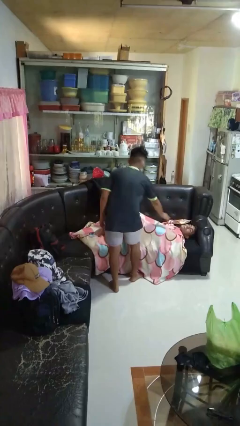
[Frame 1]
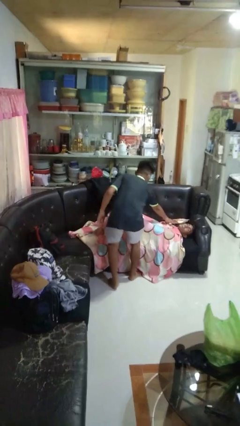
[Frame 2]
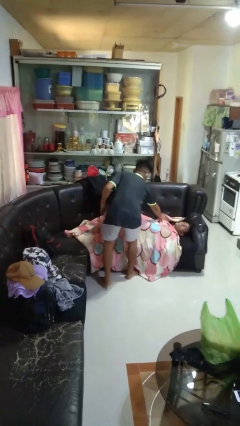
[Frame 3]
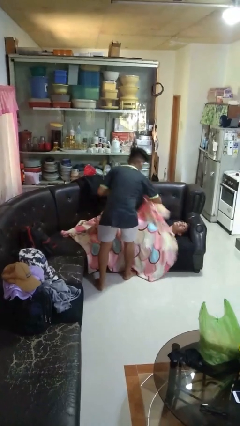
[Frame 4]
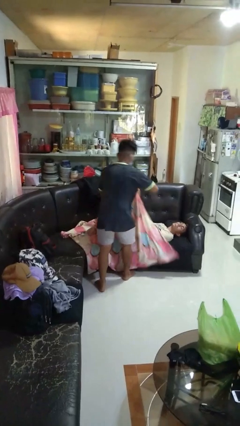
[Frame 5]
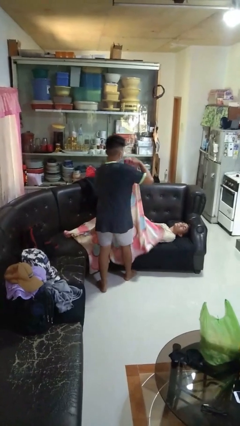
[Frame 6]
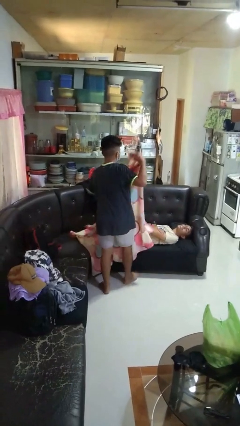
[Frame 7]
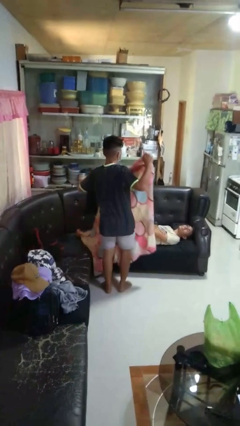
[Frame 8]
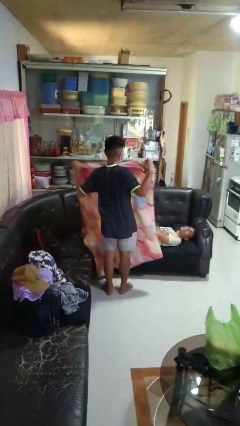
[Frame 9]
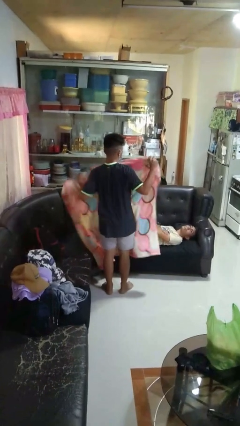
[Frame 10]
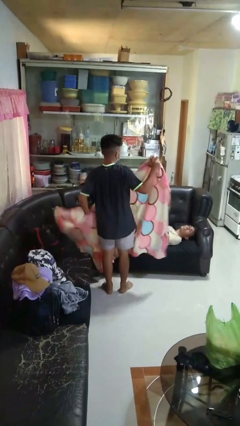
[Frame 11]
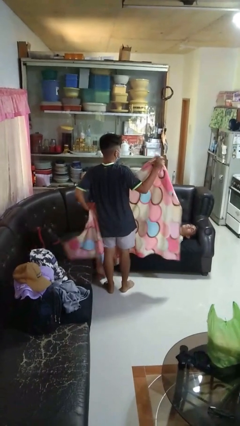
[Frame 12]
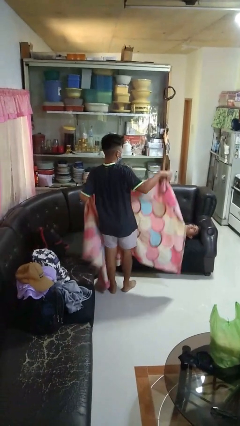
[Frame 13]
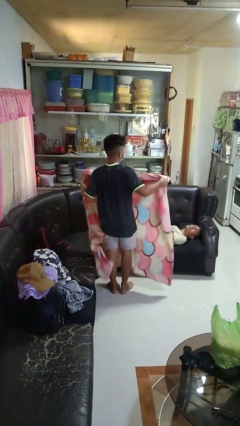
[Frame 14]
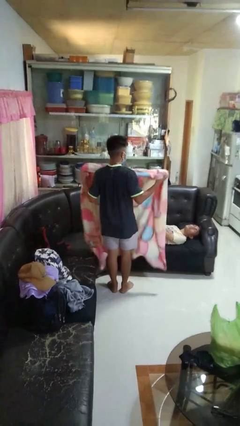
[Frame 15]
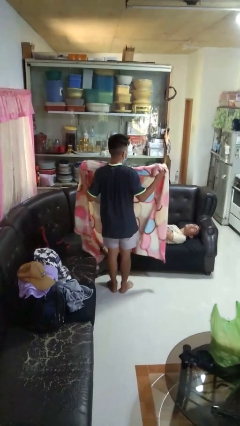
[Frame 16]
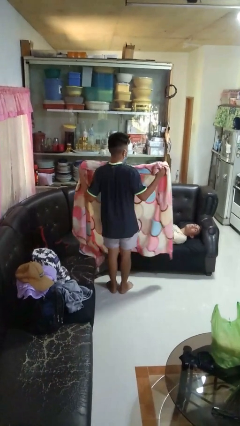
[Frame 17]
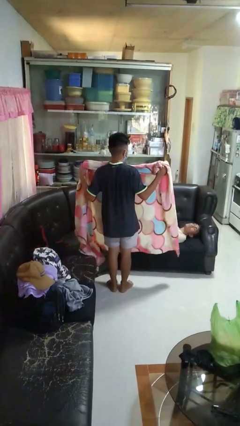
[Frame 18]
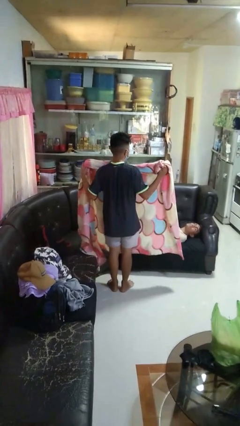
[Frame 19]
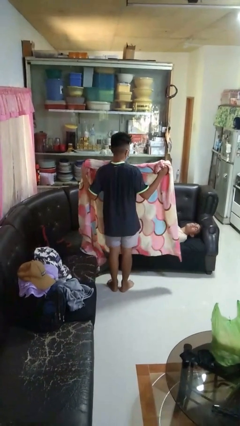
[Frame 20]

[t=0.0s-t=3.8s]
person uncovers friend with blanket

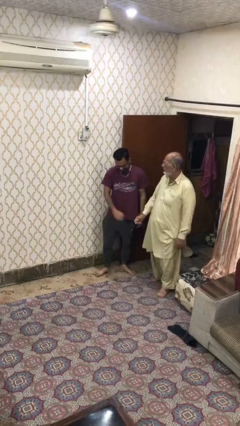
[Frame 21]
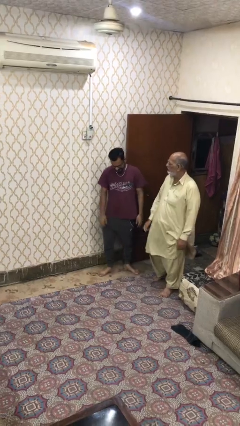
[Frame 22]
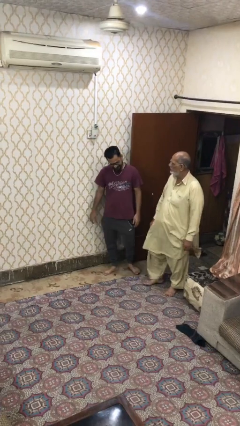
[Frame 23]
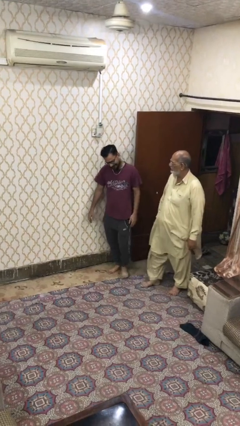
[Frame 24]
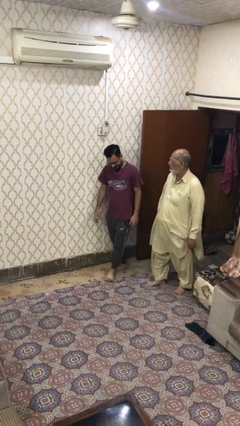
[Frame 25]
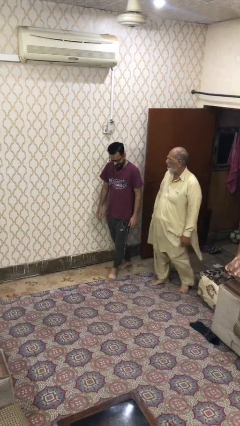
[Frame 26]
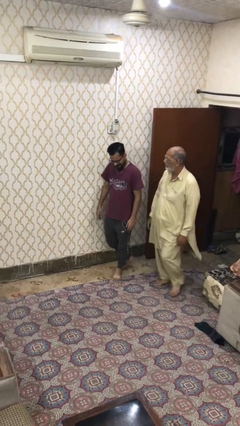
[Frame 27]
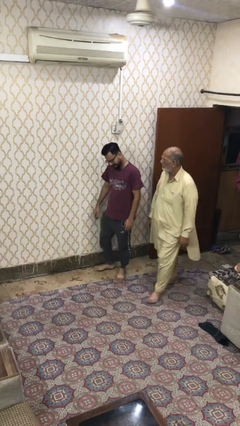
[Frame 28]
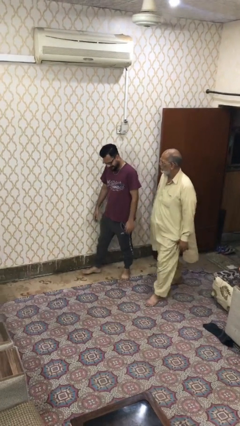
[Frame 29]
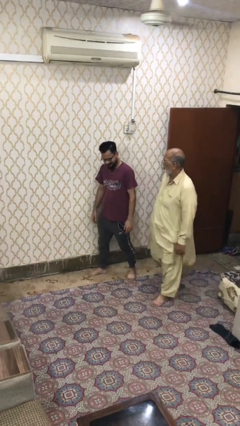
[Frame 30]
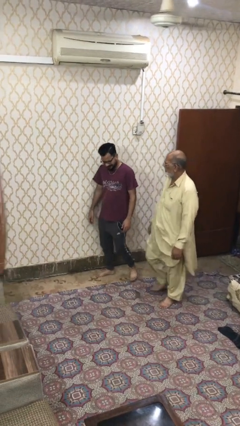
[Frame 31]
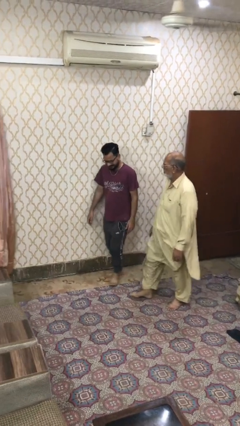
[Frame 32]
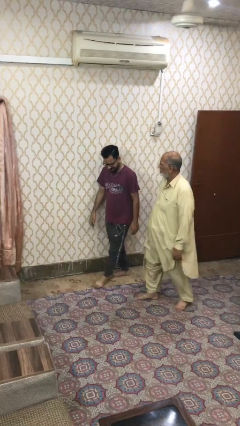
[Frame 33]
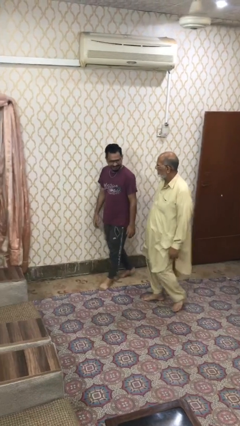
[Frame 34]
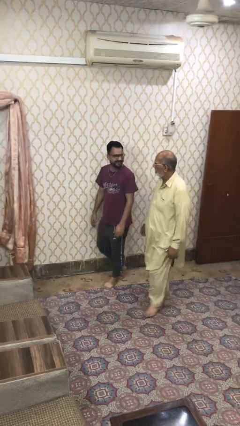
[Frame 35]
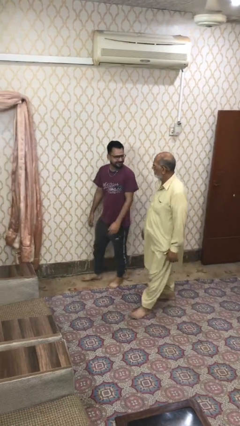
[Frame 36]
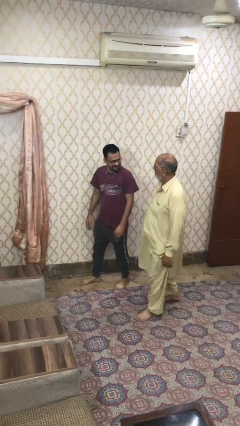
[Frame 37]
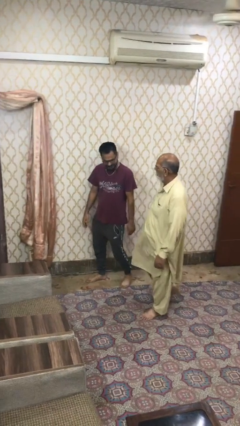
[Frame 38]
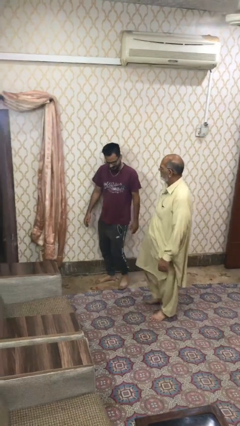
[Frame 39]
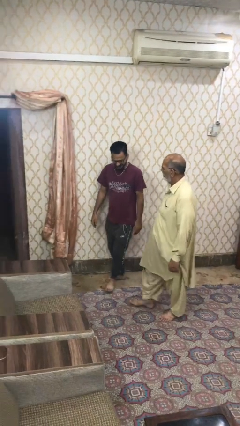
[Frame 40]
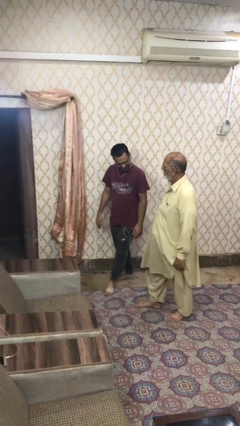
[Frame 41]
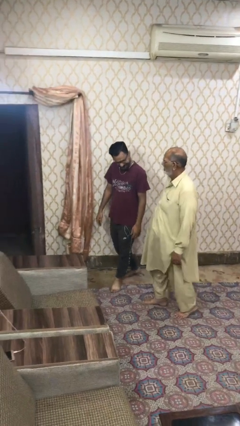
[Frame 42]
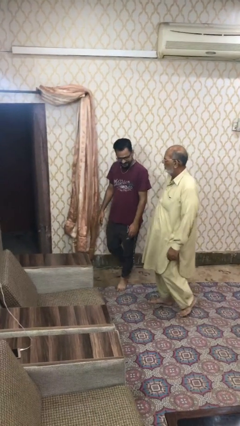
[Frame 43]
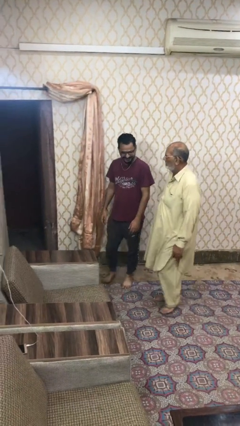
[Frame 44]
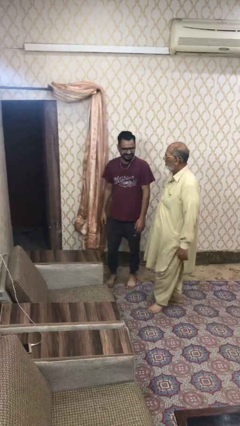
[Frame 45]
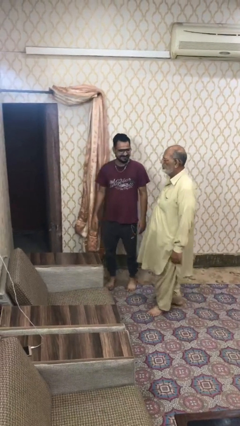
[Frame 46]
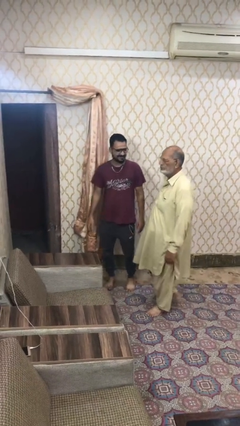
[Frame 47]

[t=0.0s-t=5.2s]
person talks to person

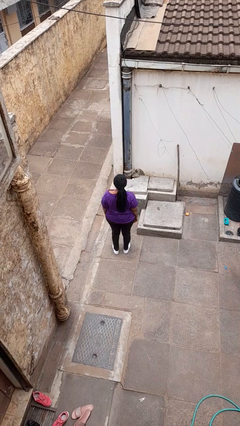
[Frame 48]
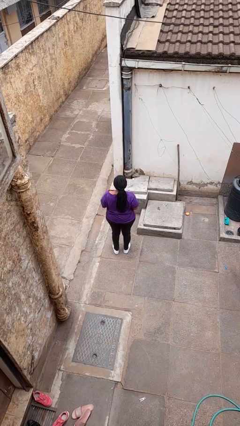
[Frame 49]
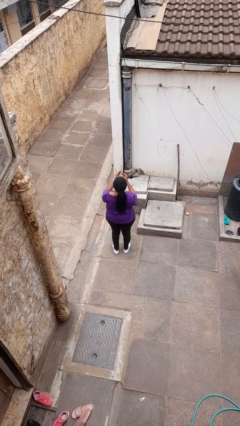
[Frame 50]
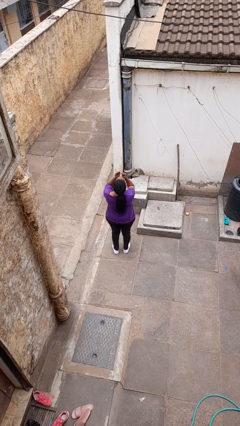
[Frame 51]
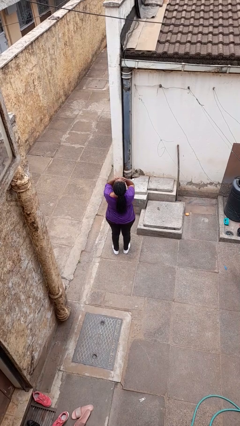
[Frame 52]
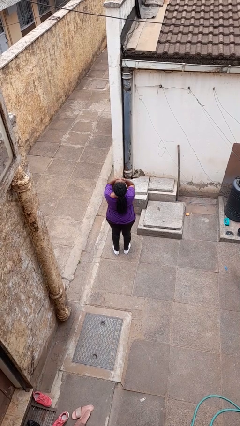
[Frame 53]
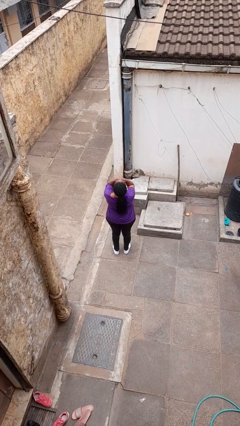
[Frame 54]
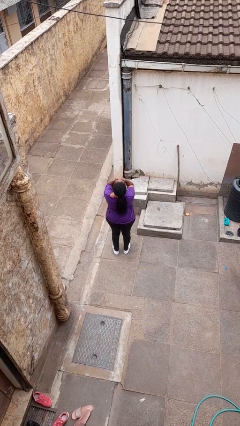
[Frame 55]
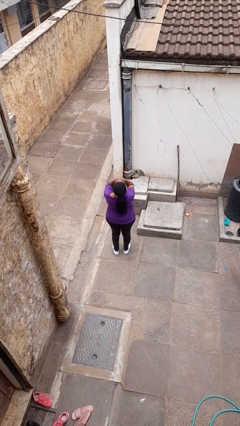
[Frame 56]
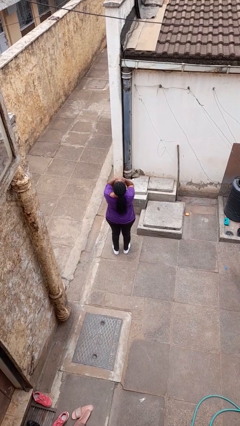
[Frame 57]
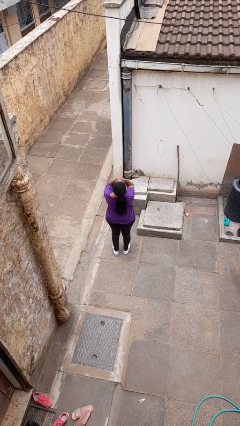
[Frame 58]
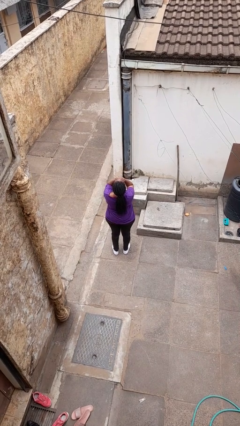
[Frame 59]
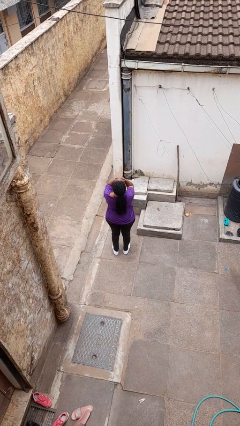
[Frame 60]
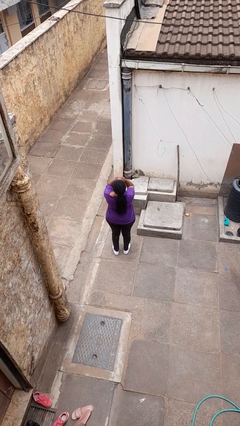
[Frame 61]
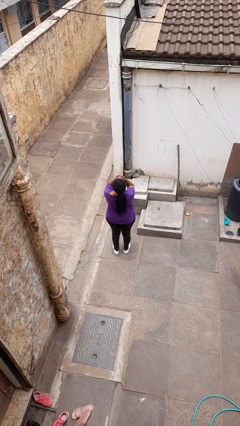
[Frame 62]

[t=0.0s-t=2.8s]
person covers face with hands

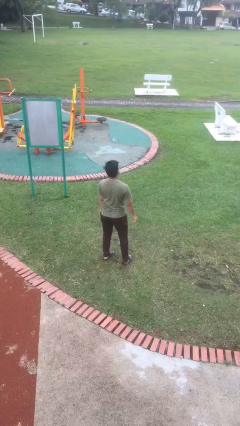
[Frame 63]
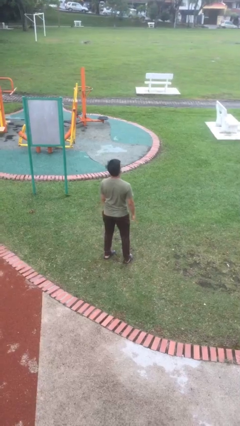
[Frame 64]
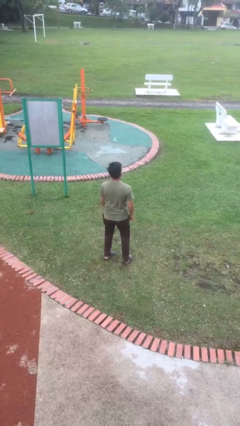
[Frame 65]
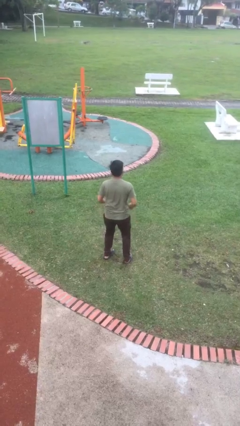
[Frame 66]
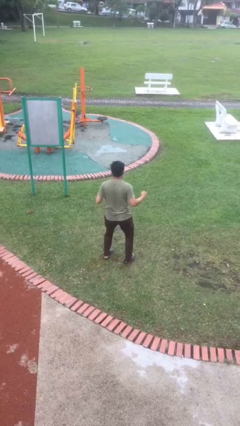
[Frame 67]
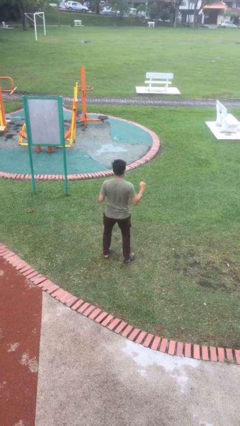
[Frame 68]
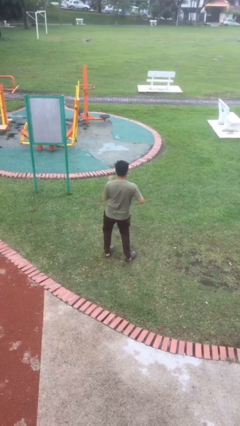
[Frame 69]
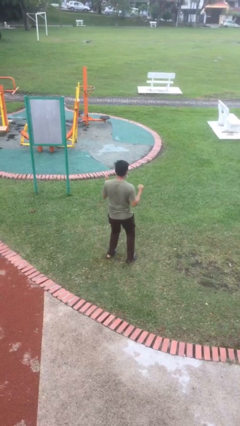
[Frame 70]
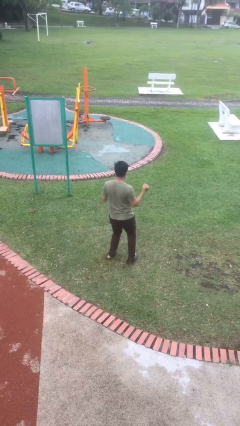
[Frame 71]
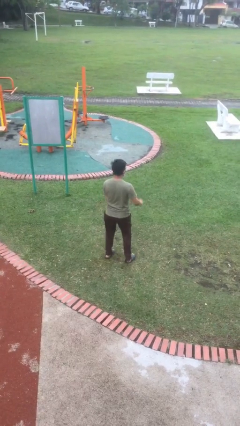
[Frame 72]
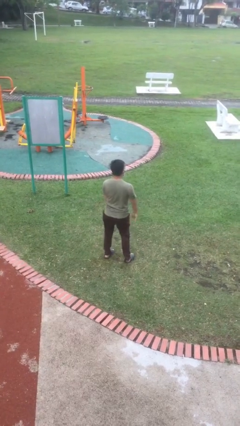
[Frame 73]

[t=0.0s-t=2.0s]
person dances in place

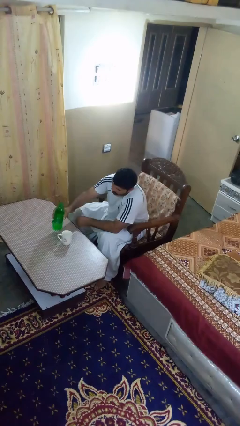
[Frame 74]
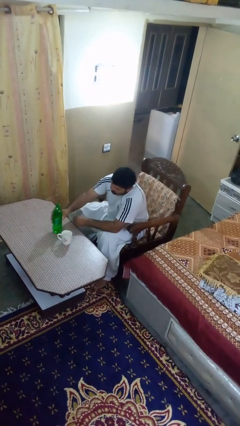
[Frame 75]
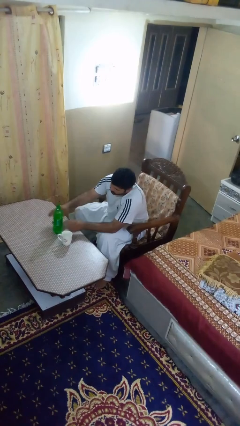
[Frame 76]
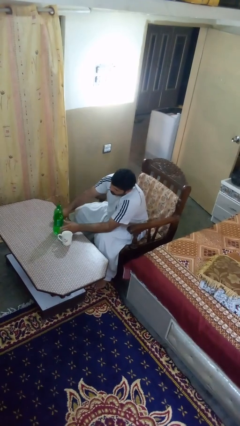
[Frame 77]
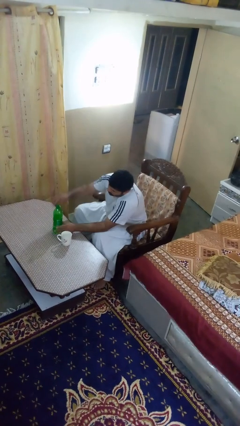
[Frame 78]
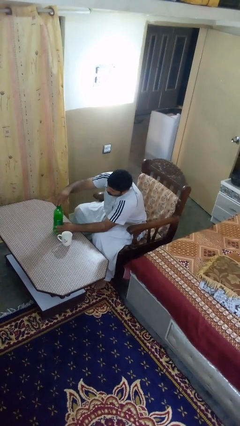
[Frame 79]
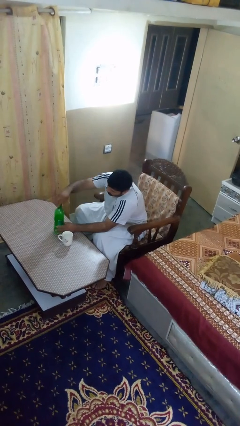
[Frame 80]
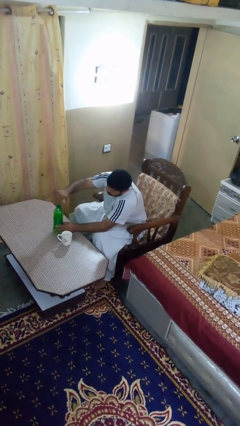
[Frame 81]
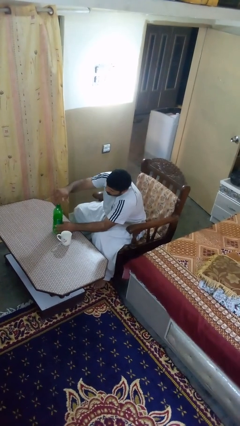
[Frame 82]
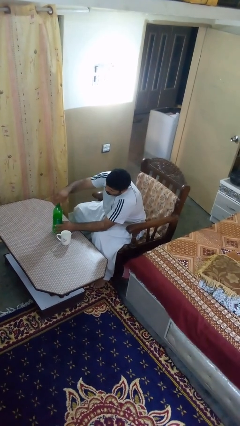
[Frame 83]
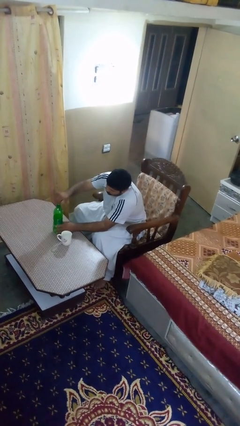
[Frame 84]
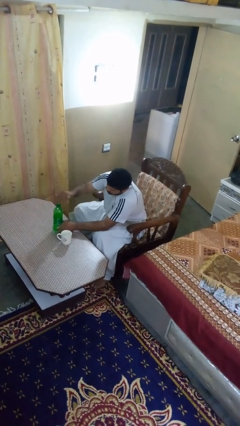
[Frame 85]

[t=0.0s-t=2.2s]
person screws lid to bottle

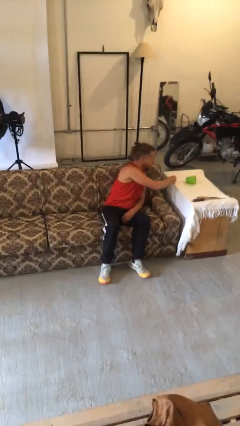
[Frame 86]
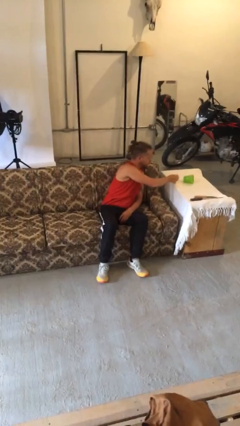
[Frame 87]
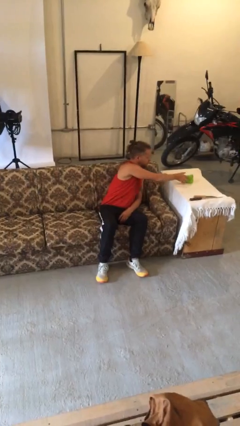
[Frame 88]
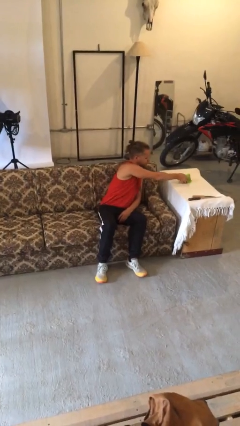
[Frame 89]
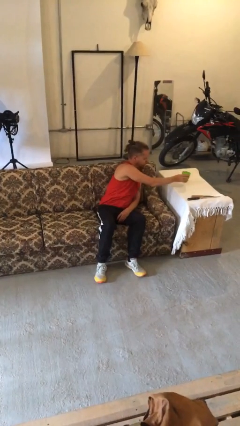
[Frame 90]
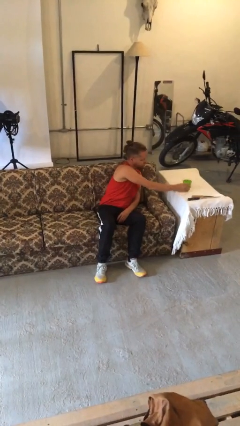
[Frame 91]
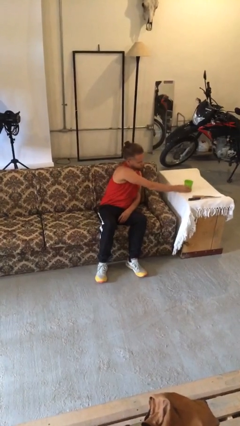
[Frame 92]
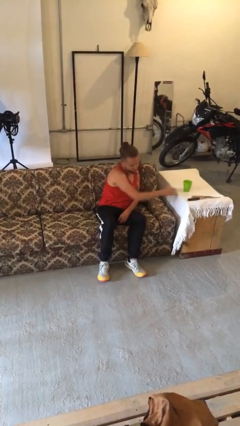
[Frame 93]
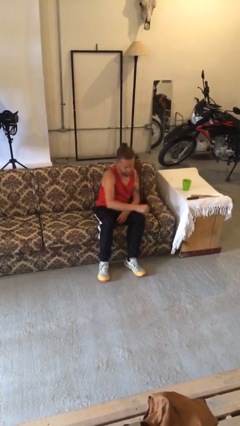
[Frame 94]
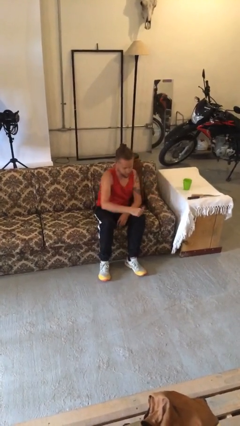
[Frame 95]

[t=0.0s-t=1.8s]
person sets upright glass
